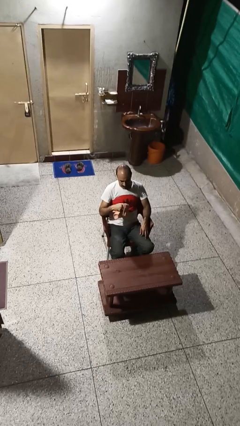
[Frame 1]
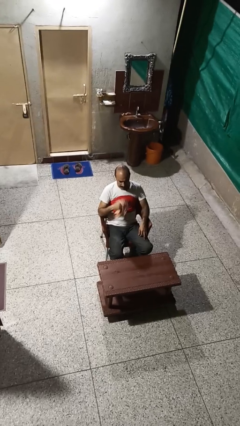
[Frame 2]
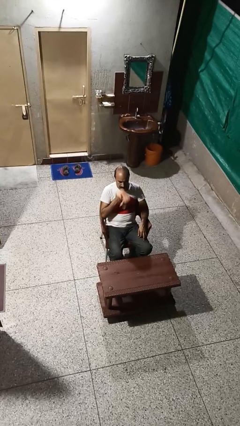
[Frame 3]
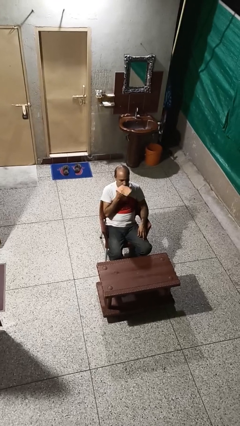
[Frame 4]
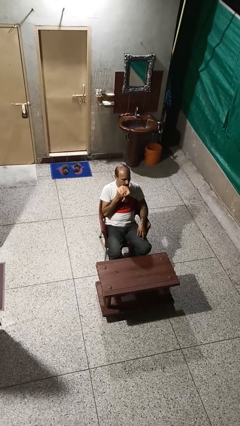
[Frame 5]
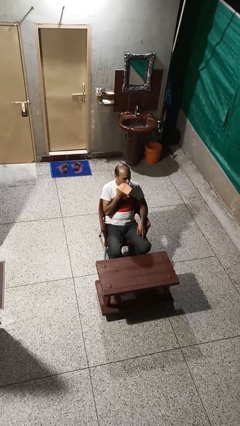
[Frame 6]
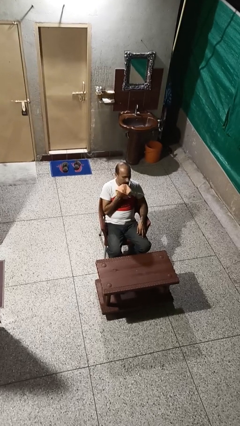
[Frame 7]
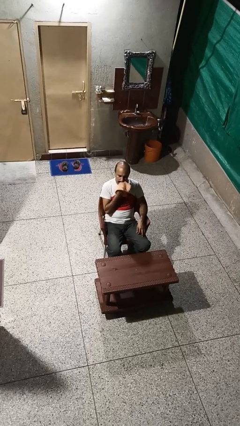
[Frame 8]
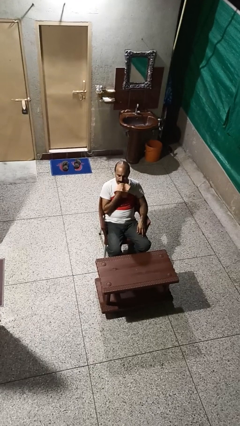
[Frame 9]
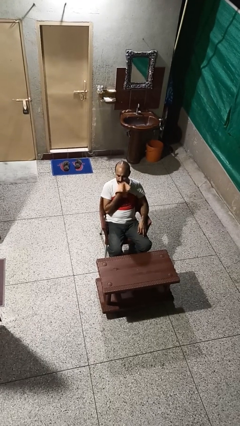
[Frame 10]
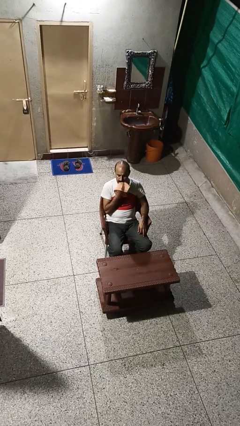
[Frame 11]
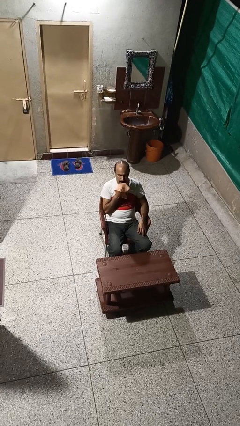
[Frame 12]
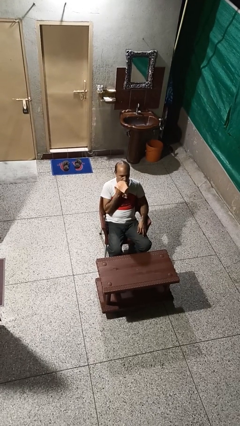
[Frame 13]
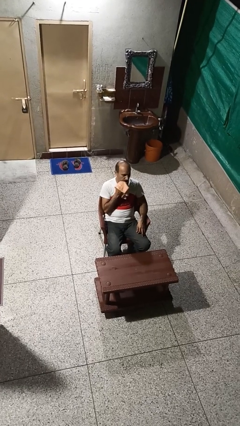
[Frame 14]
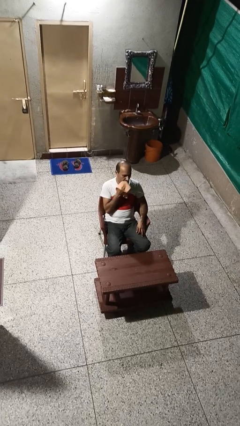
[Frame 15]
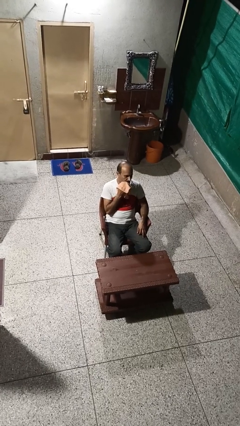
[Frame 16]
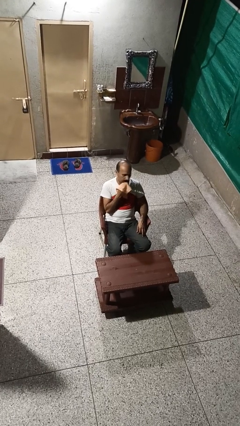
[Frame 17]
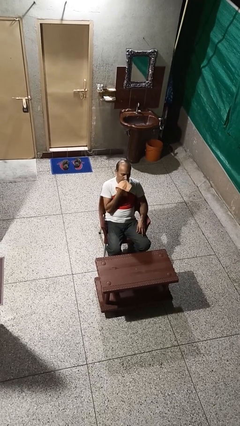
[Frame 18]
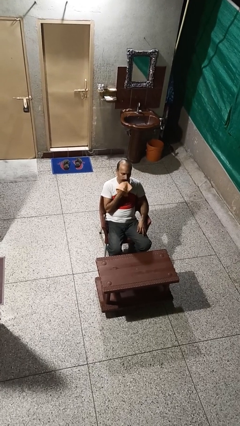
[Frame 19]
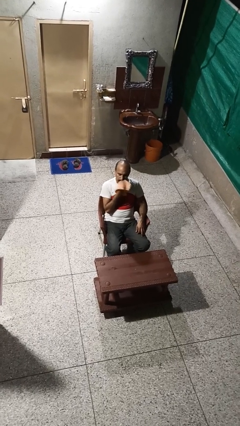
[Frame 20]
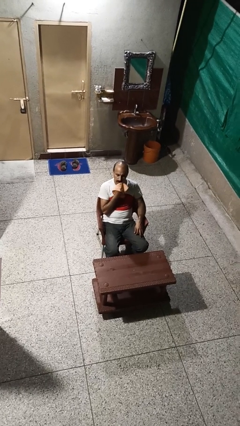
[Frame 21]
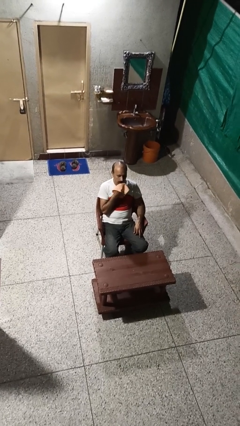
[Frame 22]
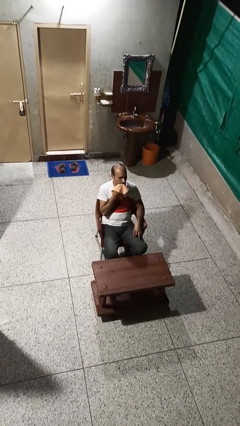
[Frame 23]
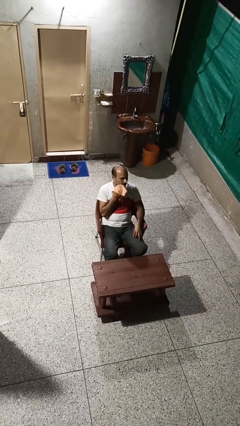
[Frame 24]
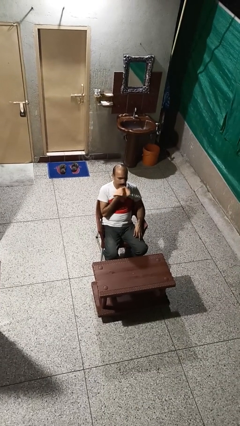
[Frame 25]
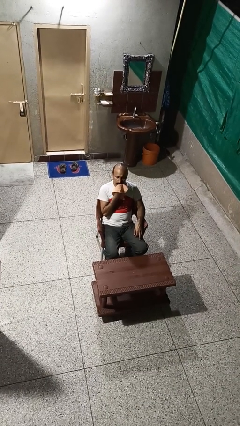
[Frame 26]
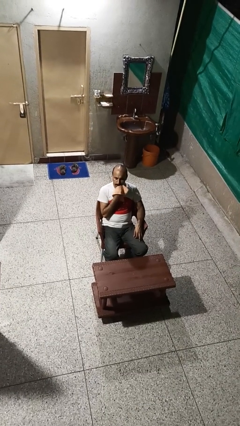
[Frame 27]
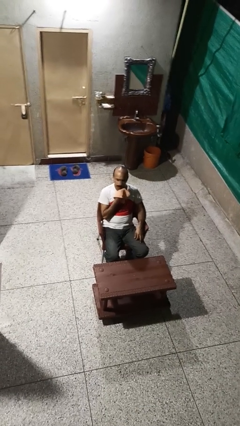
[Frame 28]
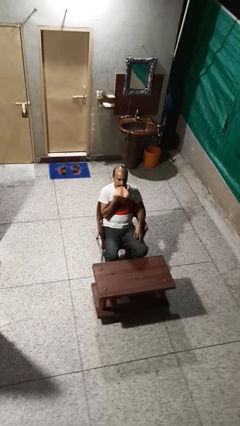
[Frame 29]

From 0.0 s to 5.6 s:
person wipes mouth with napkin

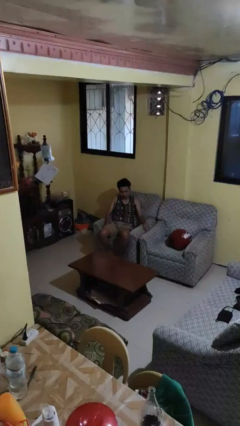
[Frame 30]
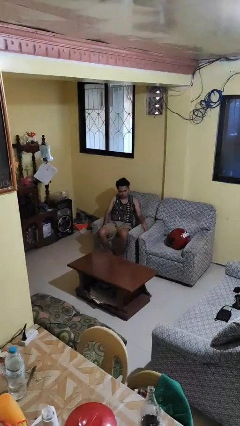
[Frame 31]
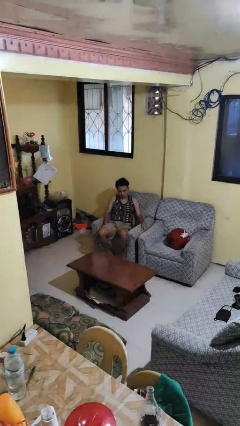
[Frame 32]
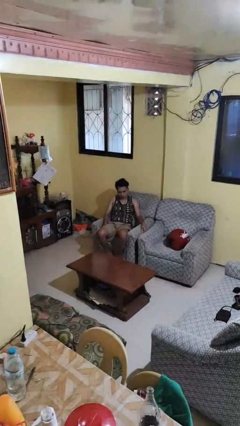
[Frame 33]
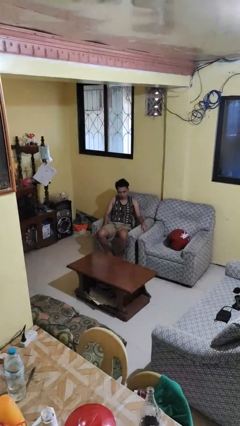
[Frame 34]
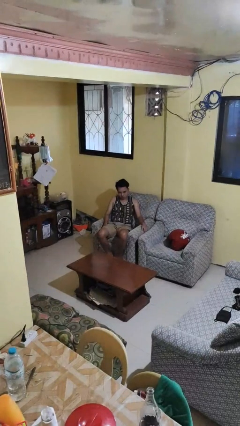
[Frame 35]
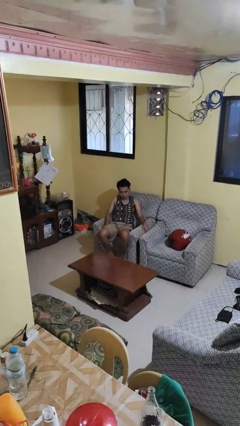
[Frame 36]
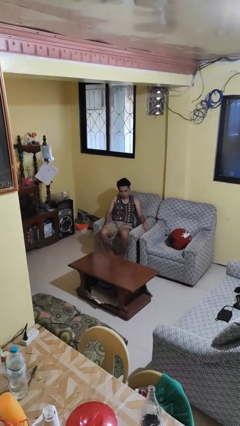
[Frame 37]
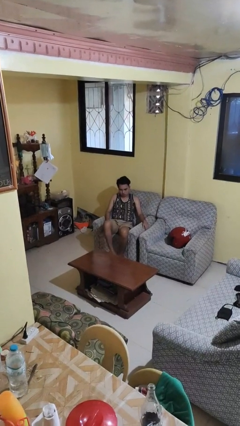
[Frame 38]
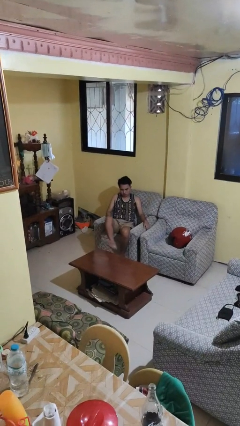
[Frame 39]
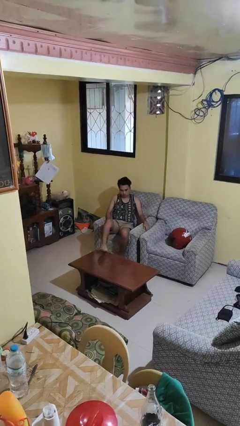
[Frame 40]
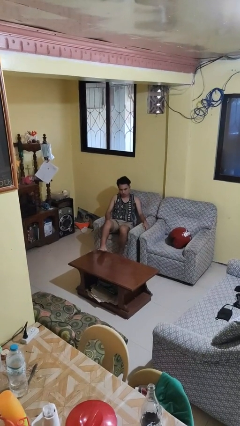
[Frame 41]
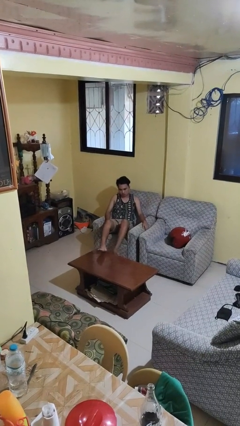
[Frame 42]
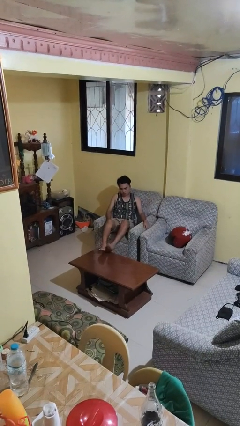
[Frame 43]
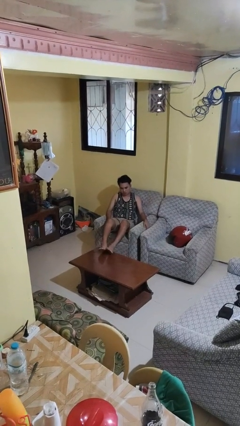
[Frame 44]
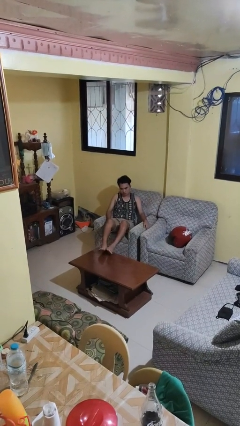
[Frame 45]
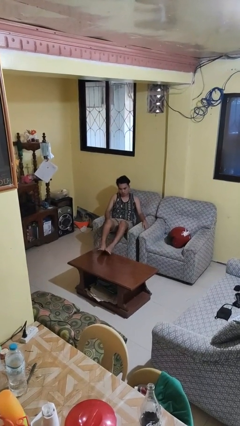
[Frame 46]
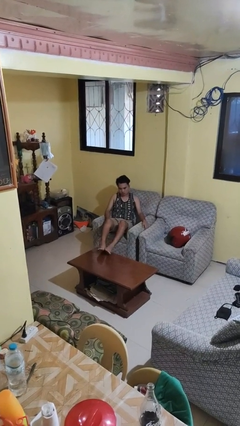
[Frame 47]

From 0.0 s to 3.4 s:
person puts feet up

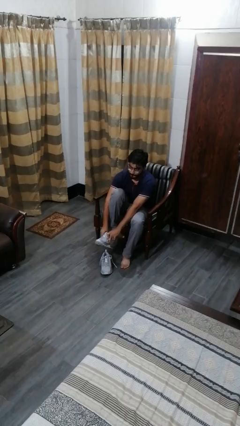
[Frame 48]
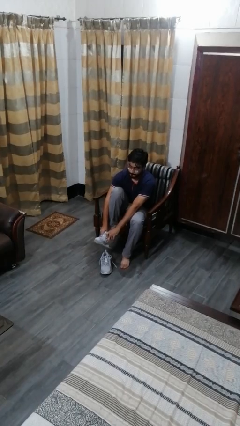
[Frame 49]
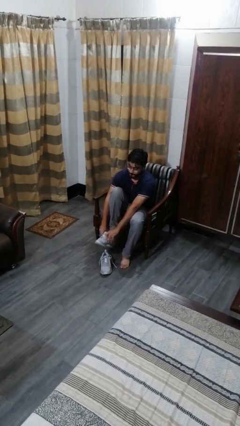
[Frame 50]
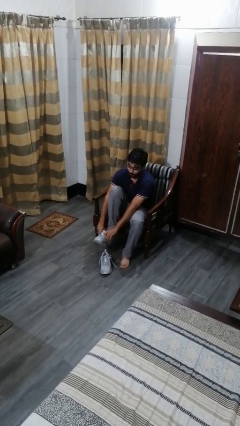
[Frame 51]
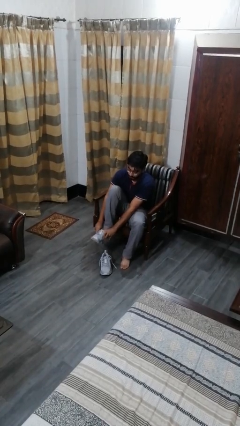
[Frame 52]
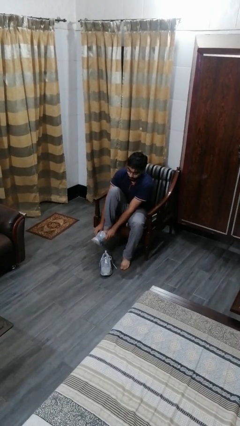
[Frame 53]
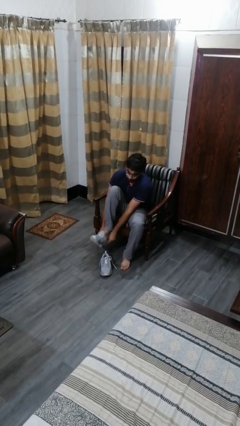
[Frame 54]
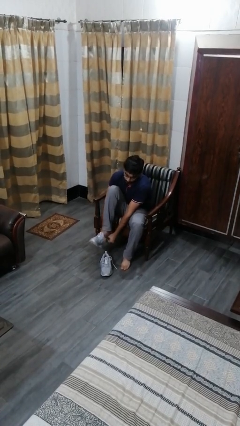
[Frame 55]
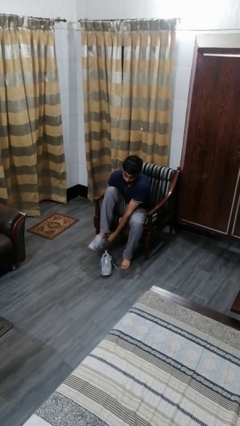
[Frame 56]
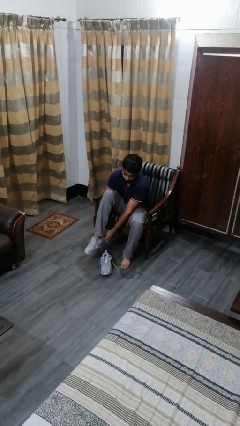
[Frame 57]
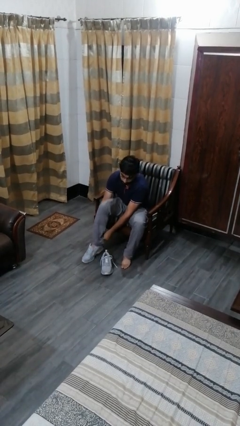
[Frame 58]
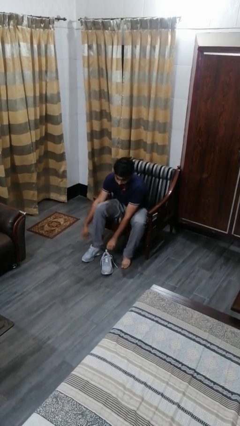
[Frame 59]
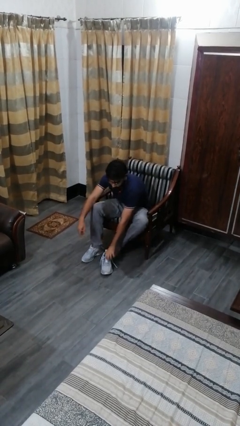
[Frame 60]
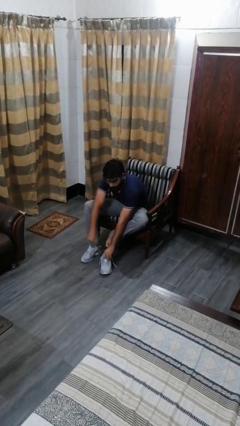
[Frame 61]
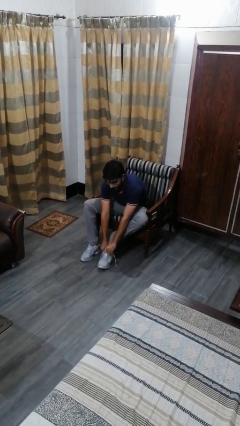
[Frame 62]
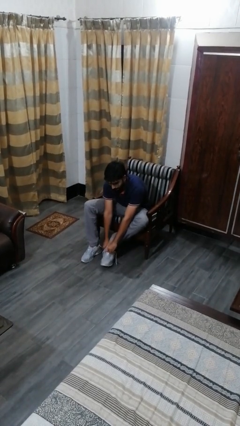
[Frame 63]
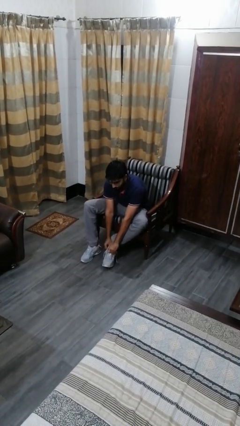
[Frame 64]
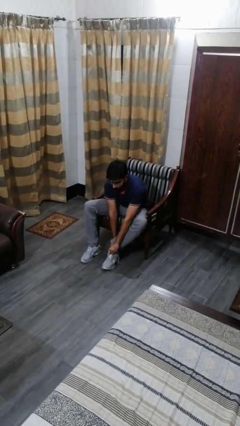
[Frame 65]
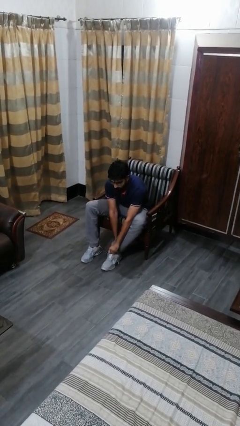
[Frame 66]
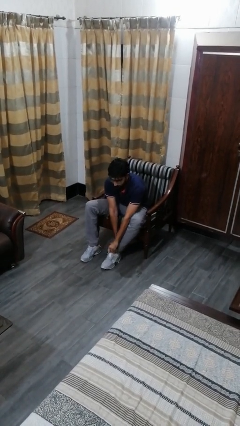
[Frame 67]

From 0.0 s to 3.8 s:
person puts on shoes

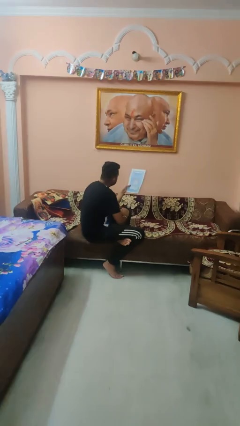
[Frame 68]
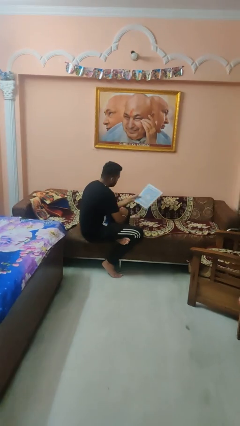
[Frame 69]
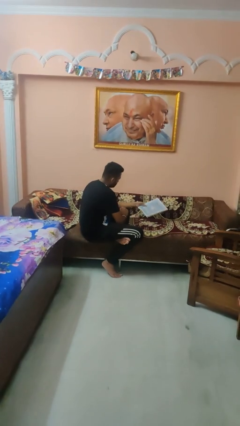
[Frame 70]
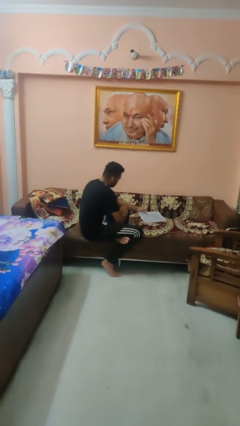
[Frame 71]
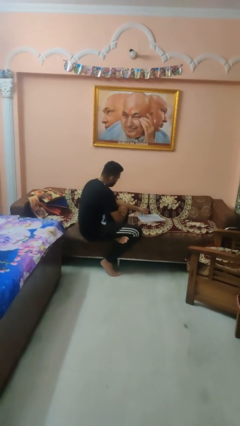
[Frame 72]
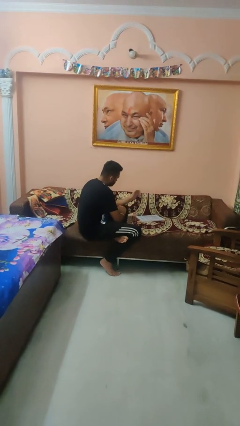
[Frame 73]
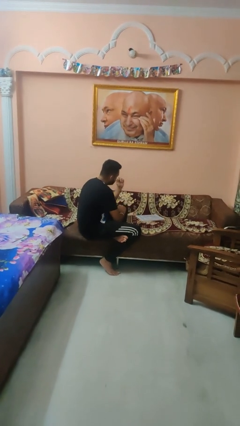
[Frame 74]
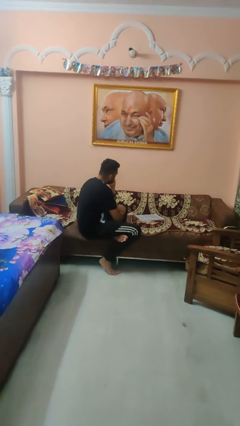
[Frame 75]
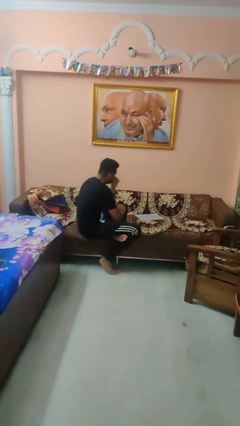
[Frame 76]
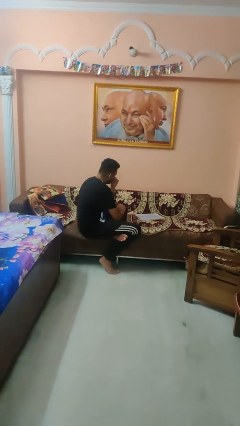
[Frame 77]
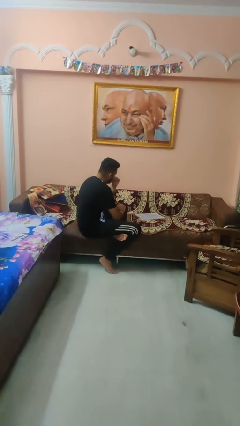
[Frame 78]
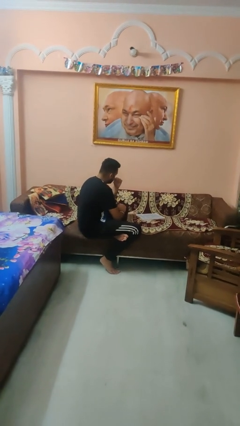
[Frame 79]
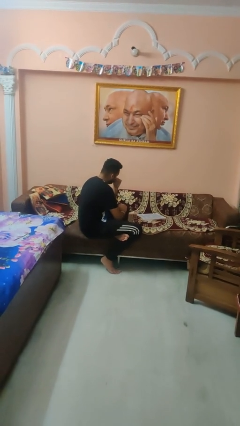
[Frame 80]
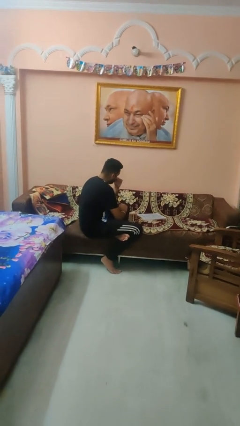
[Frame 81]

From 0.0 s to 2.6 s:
person puts down object on couch

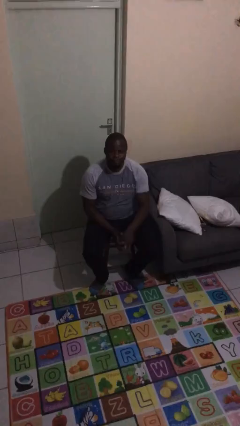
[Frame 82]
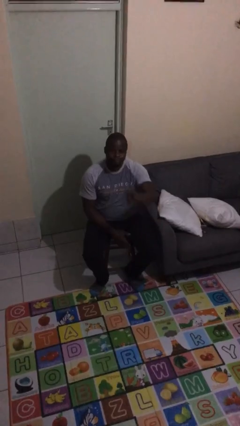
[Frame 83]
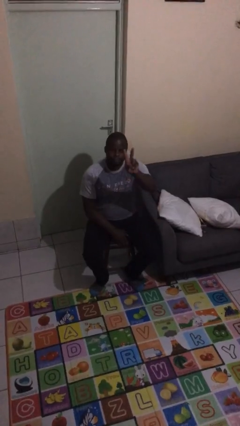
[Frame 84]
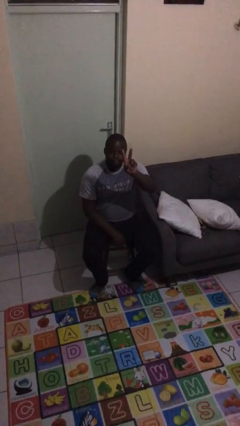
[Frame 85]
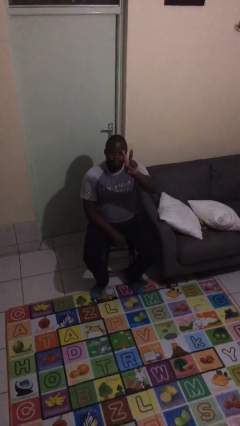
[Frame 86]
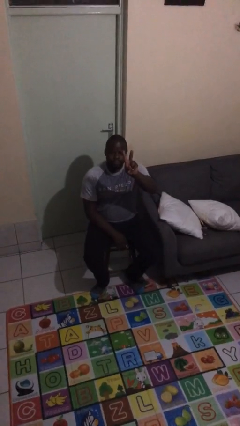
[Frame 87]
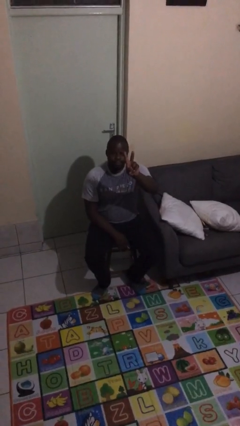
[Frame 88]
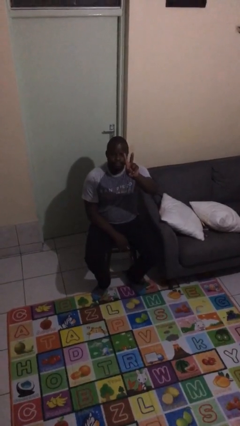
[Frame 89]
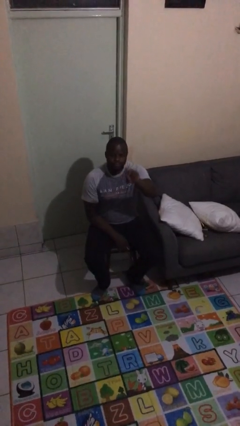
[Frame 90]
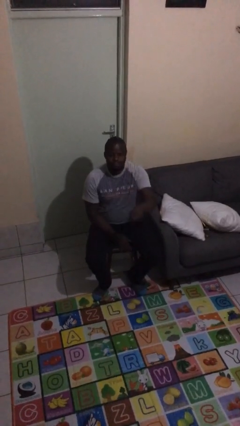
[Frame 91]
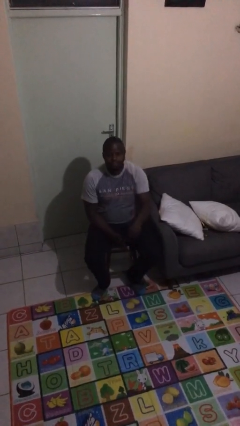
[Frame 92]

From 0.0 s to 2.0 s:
person gestures peace
